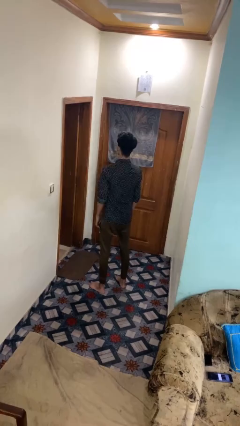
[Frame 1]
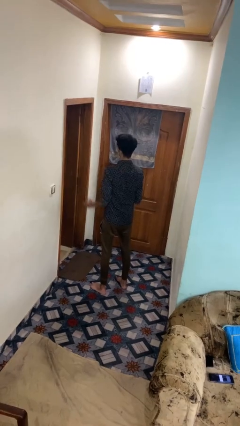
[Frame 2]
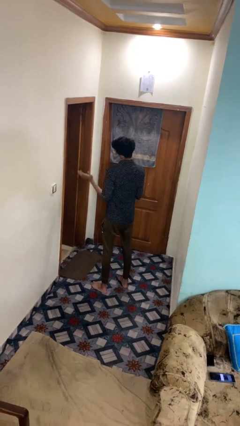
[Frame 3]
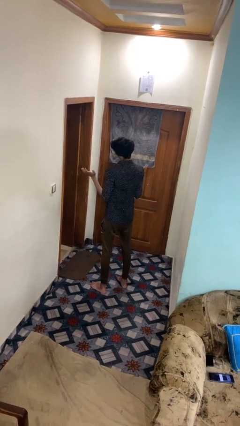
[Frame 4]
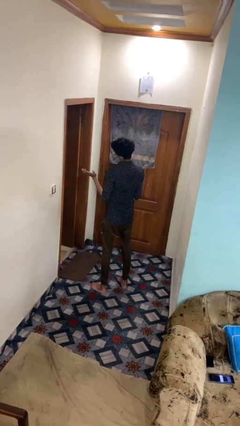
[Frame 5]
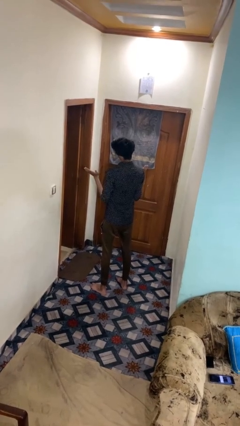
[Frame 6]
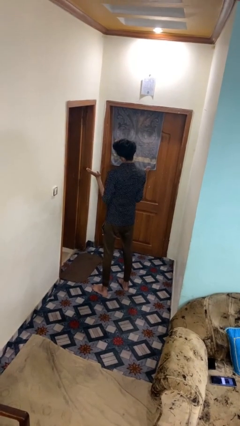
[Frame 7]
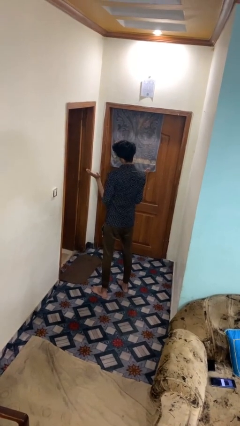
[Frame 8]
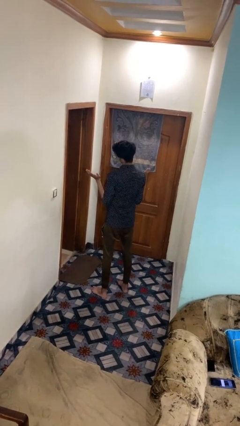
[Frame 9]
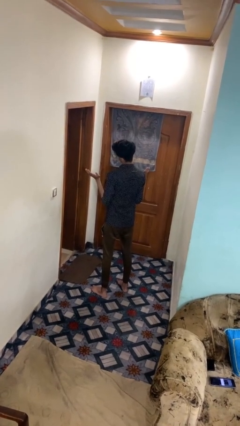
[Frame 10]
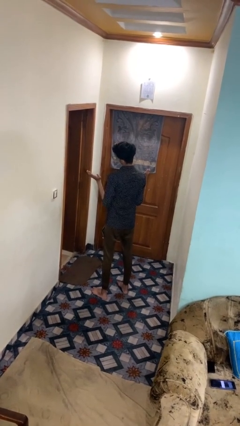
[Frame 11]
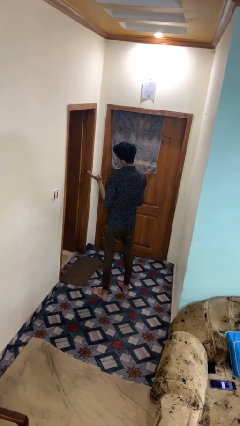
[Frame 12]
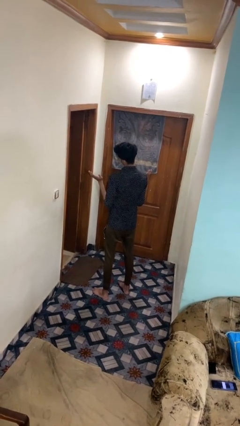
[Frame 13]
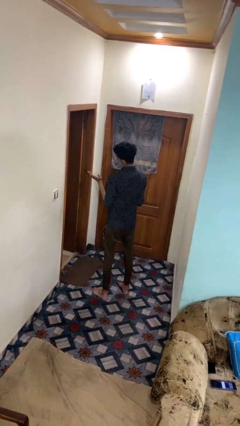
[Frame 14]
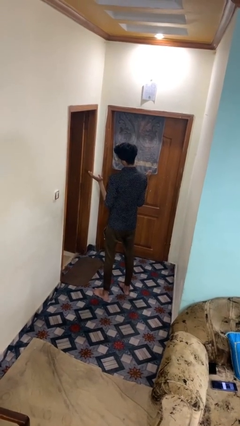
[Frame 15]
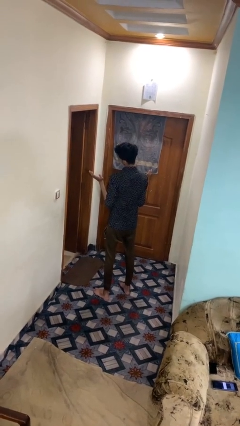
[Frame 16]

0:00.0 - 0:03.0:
person shrugs

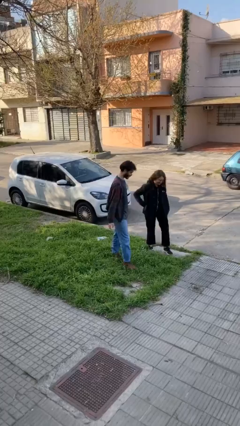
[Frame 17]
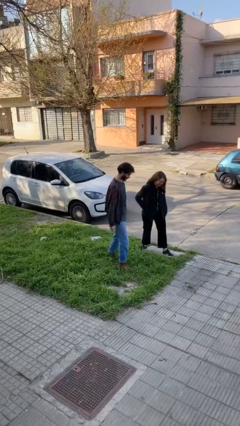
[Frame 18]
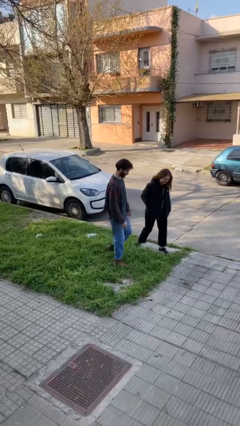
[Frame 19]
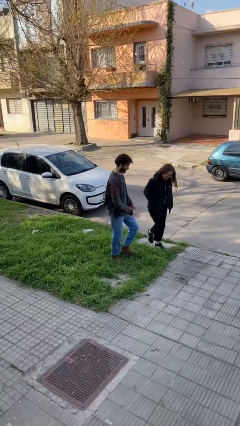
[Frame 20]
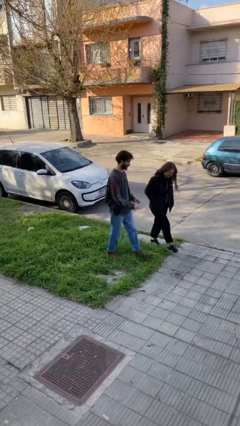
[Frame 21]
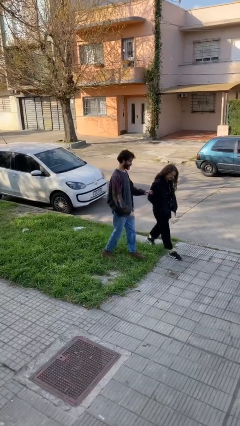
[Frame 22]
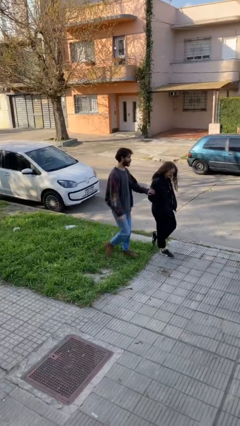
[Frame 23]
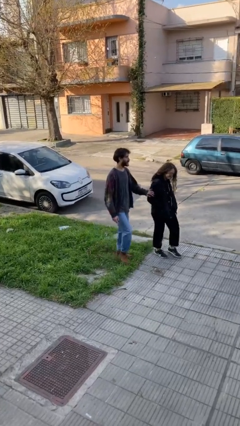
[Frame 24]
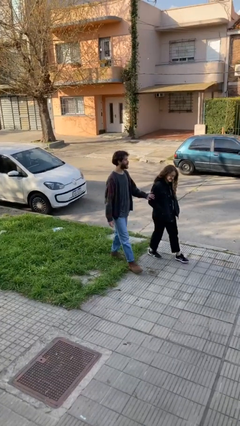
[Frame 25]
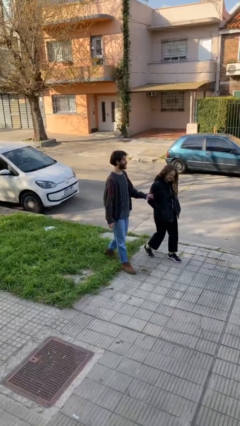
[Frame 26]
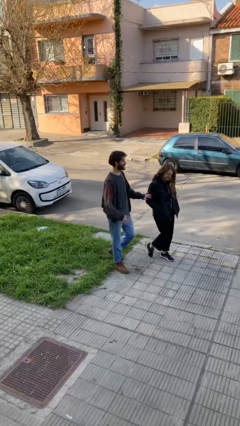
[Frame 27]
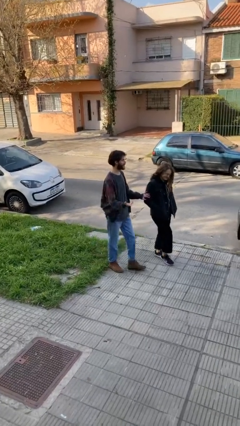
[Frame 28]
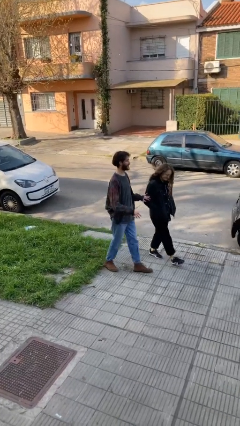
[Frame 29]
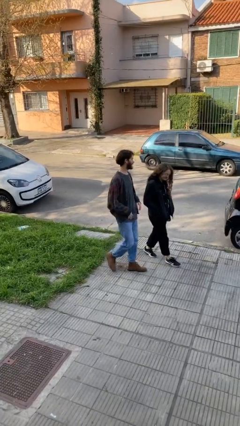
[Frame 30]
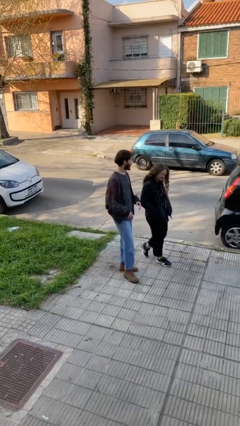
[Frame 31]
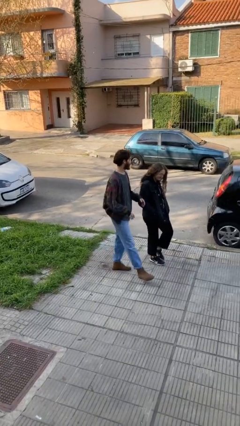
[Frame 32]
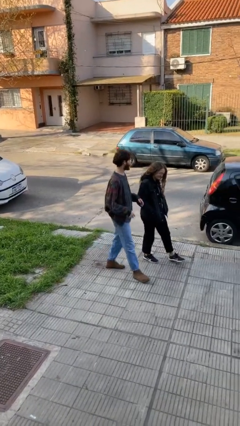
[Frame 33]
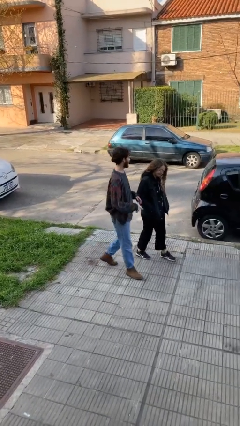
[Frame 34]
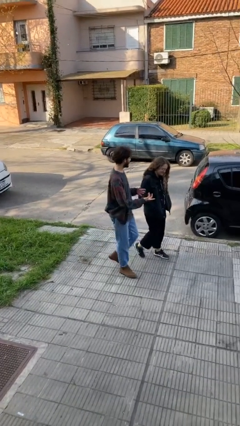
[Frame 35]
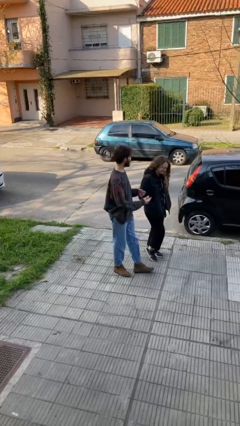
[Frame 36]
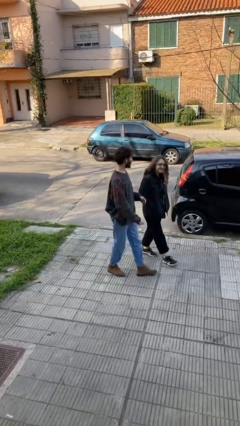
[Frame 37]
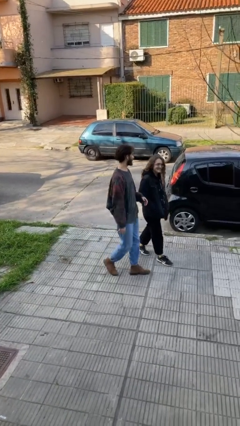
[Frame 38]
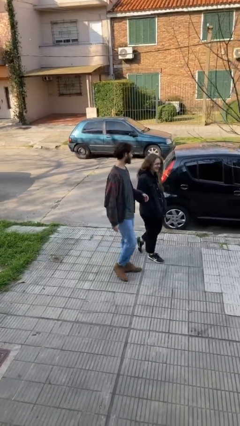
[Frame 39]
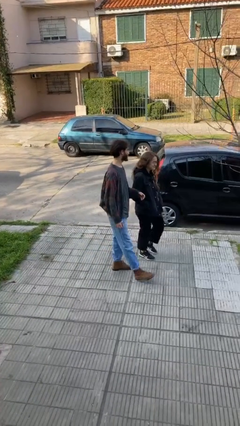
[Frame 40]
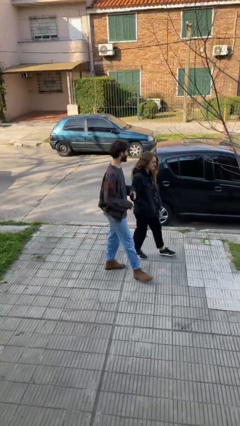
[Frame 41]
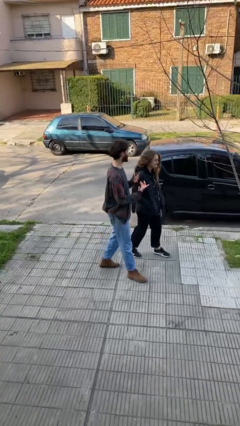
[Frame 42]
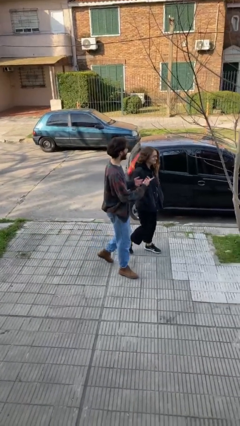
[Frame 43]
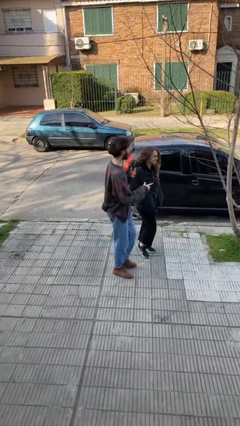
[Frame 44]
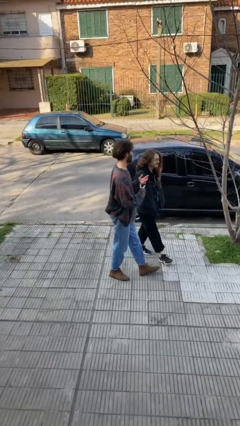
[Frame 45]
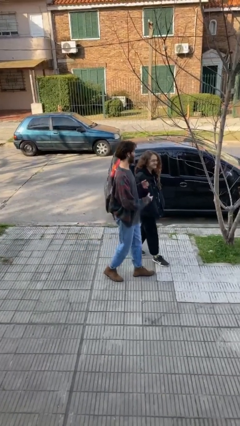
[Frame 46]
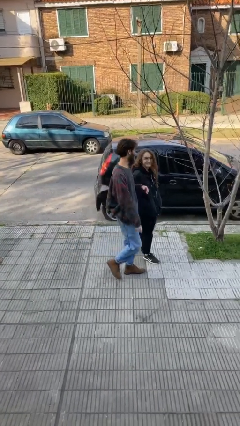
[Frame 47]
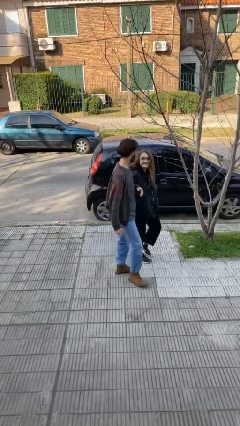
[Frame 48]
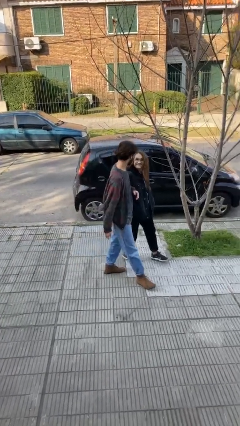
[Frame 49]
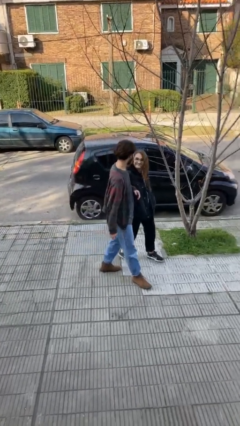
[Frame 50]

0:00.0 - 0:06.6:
person talks to person

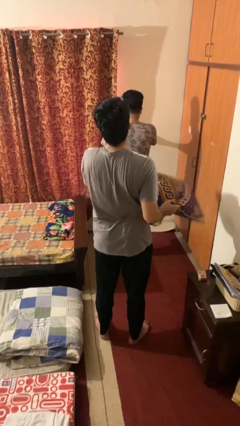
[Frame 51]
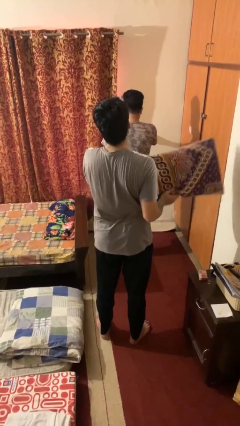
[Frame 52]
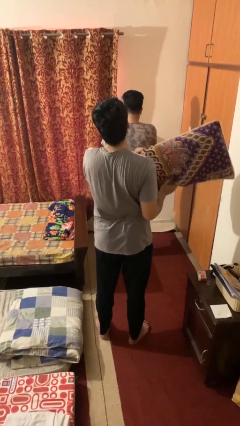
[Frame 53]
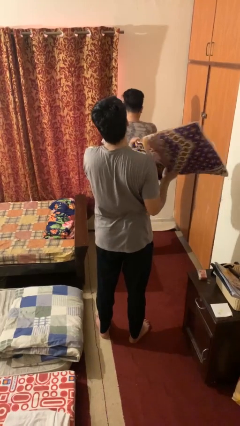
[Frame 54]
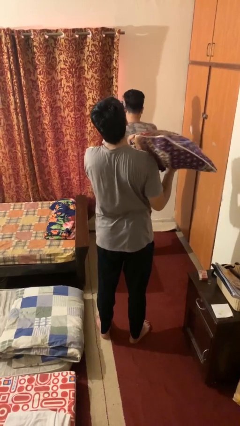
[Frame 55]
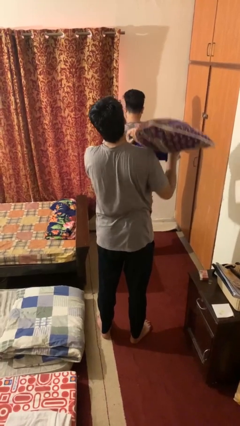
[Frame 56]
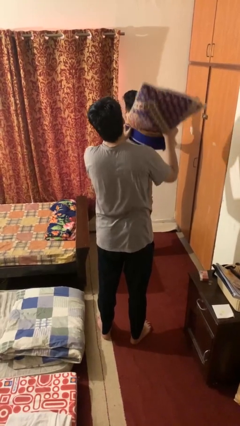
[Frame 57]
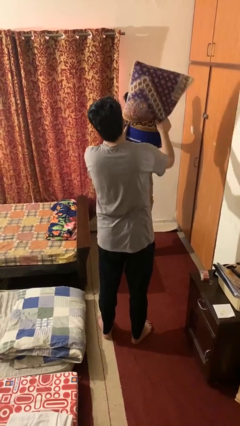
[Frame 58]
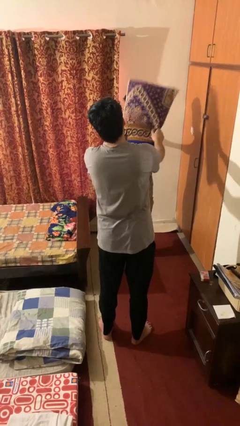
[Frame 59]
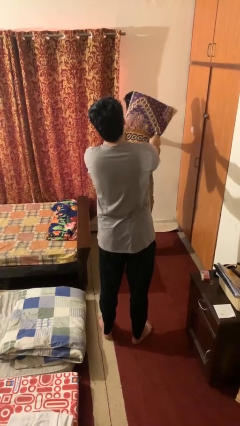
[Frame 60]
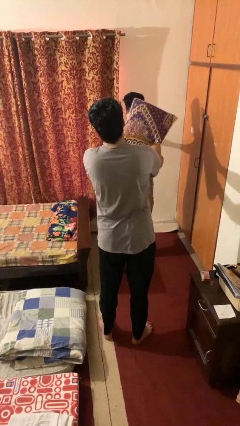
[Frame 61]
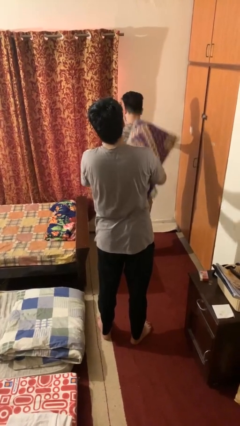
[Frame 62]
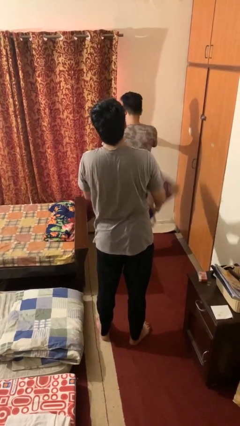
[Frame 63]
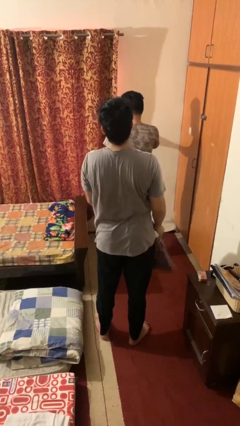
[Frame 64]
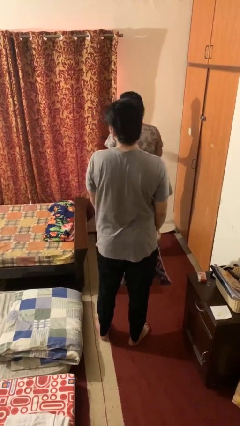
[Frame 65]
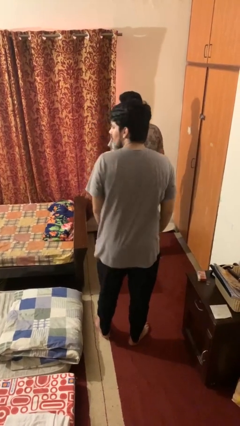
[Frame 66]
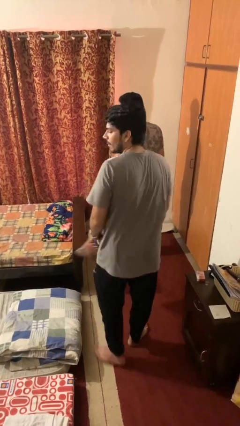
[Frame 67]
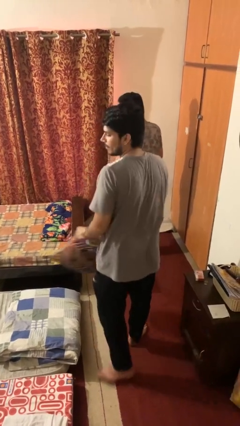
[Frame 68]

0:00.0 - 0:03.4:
person hits person with pillow

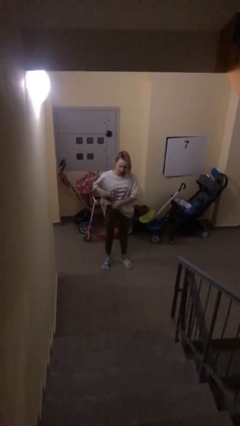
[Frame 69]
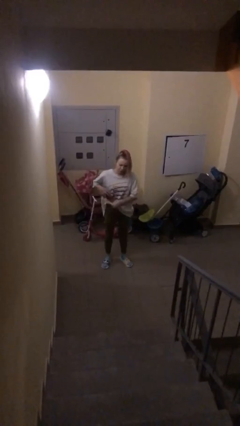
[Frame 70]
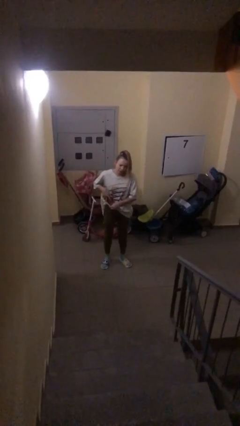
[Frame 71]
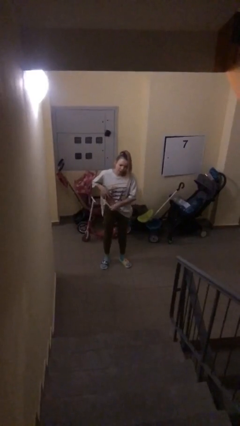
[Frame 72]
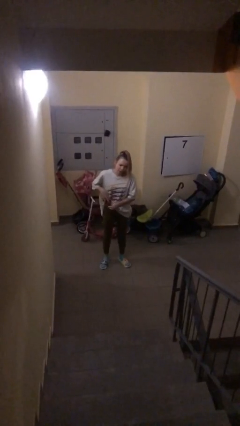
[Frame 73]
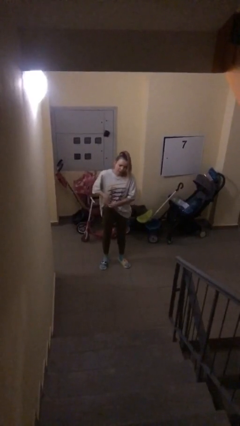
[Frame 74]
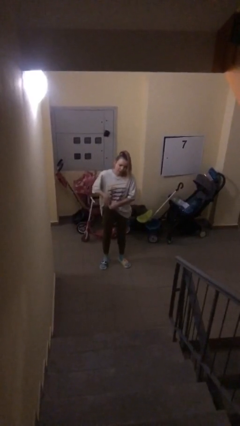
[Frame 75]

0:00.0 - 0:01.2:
person puts phone into pocket

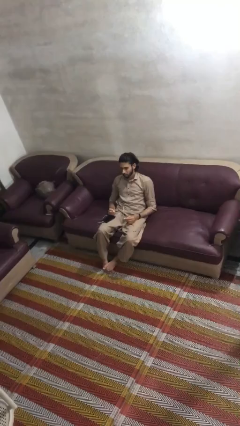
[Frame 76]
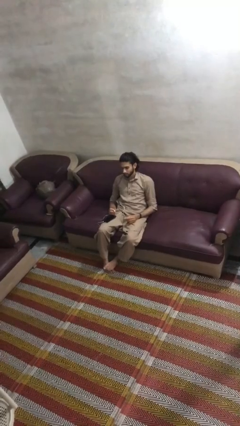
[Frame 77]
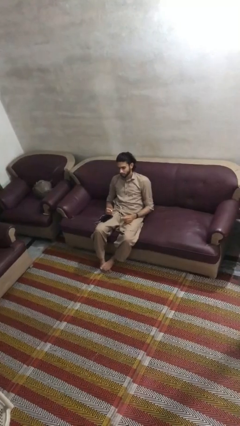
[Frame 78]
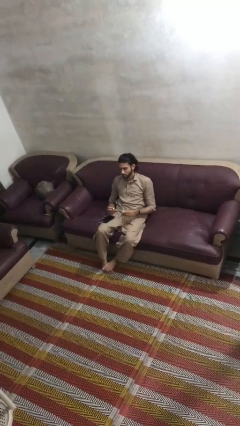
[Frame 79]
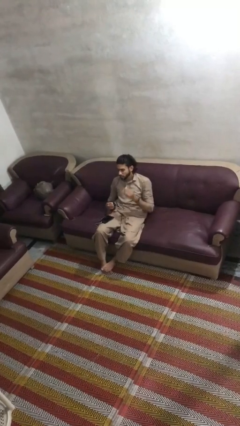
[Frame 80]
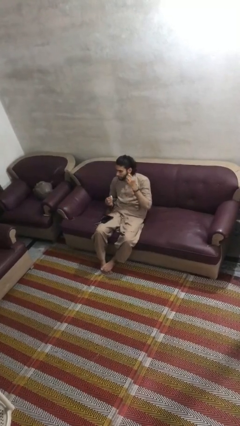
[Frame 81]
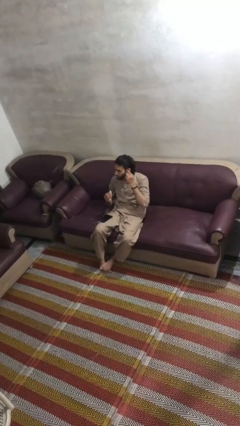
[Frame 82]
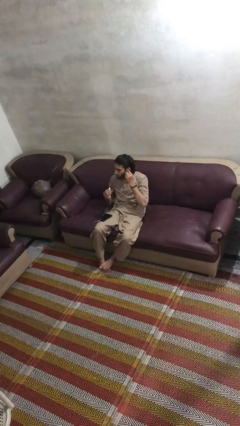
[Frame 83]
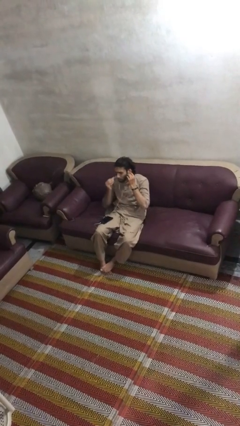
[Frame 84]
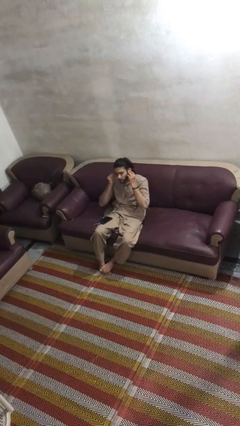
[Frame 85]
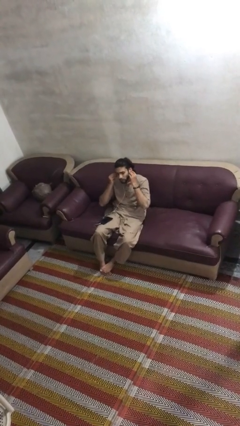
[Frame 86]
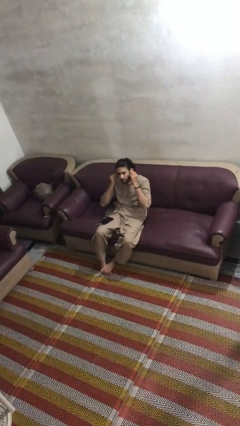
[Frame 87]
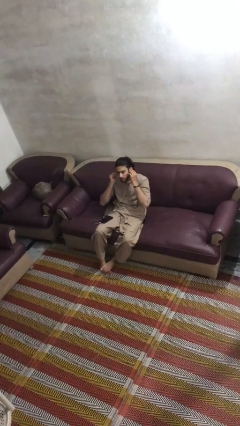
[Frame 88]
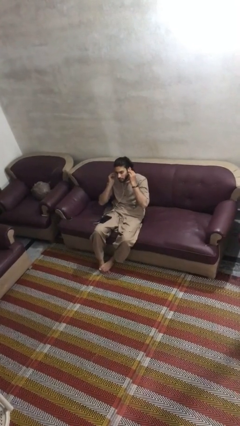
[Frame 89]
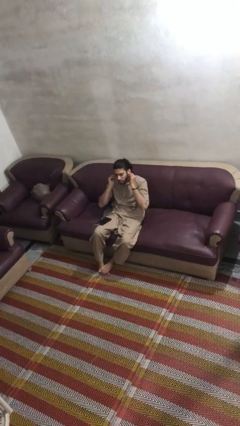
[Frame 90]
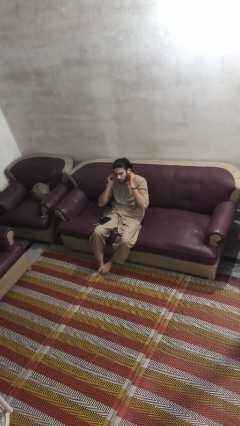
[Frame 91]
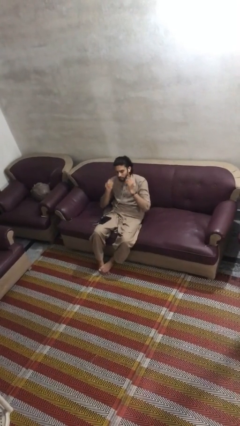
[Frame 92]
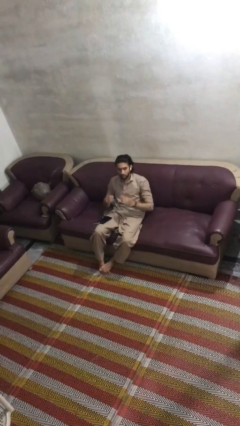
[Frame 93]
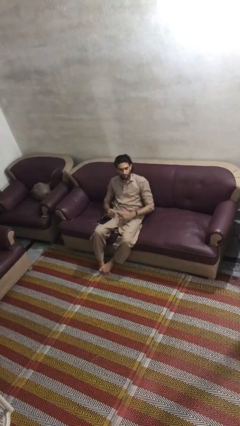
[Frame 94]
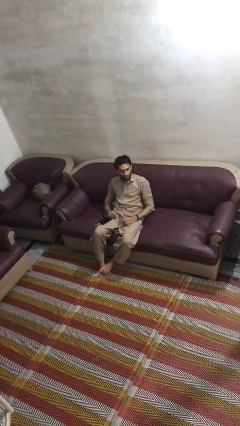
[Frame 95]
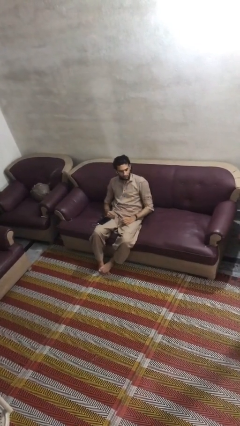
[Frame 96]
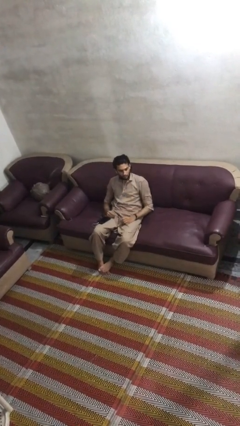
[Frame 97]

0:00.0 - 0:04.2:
person puts on headphones
